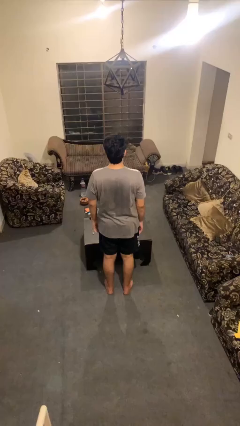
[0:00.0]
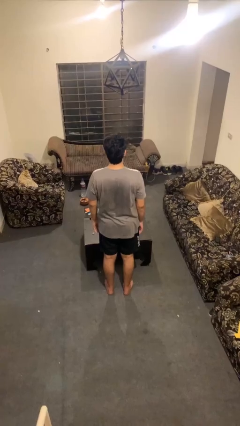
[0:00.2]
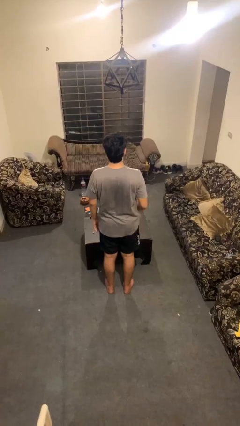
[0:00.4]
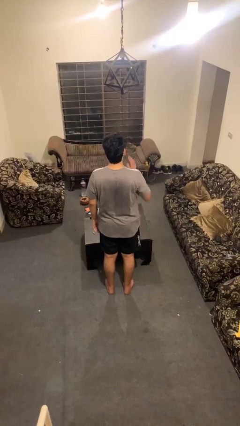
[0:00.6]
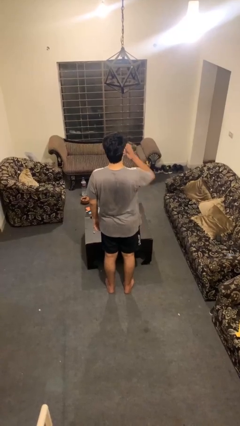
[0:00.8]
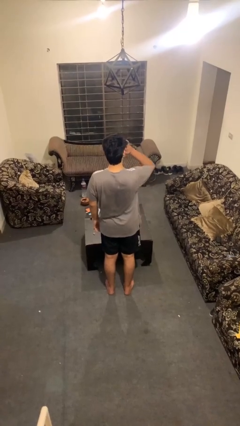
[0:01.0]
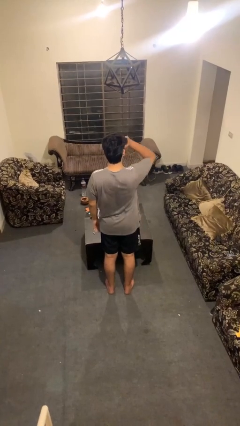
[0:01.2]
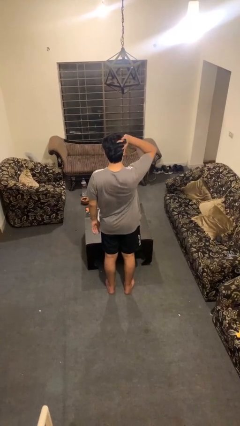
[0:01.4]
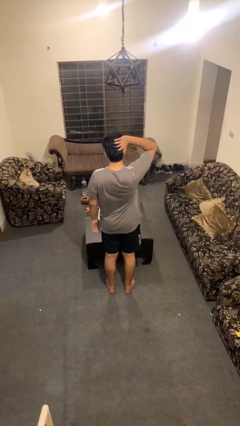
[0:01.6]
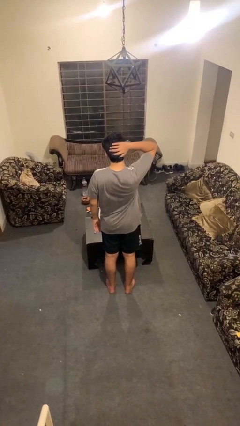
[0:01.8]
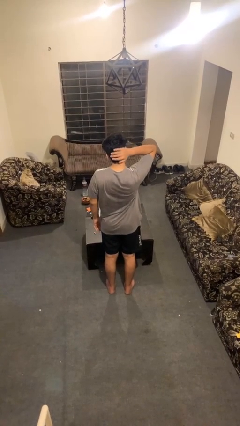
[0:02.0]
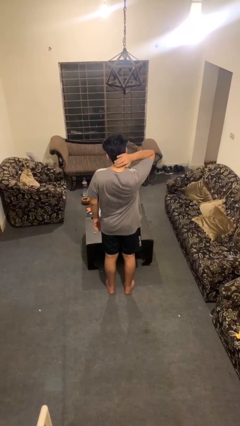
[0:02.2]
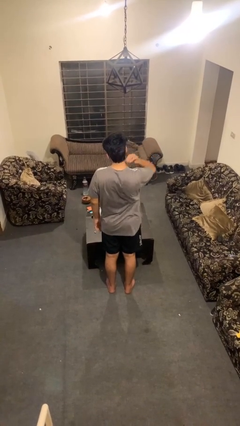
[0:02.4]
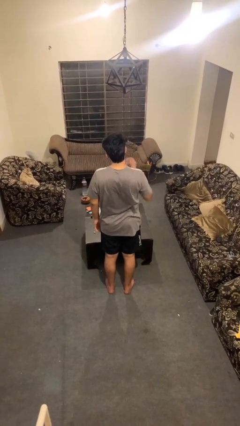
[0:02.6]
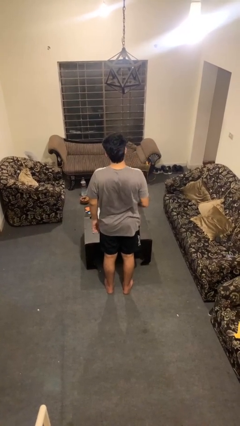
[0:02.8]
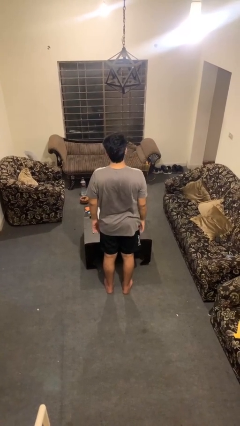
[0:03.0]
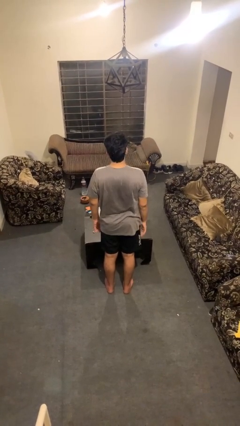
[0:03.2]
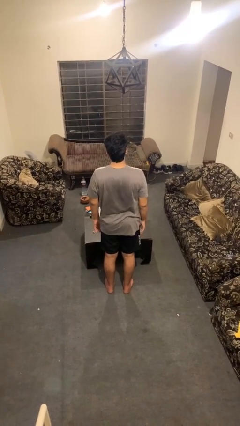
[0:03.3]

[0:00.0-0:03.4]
person strokes hair

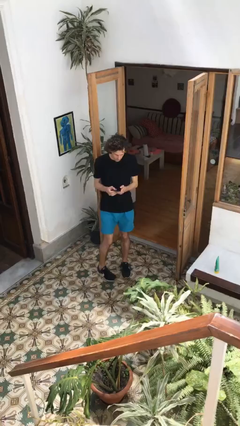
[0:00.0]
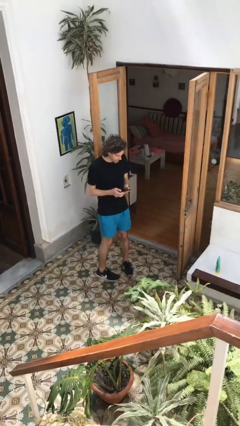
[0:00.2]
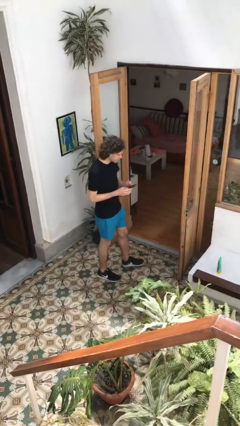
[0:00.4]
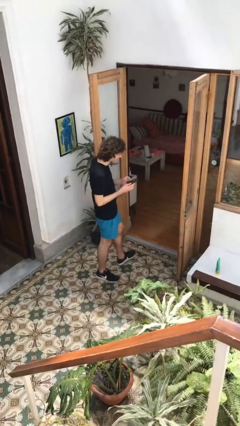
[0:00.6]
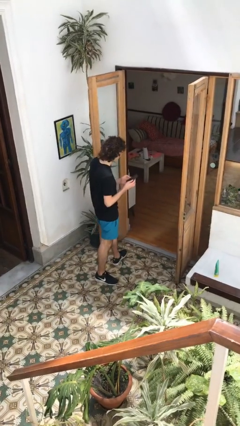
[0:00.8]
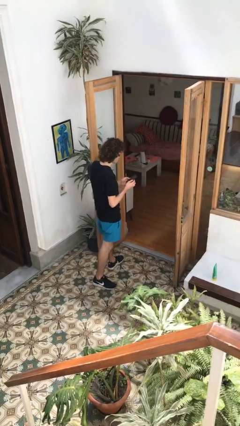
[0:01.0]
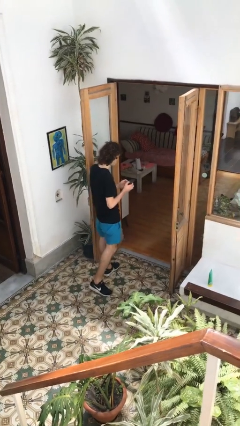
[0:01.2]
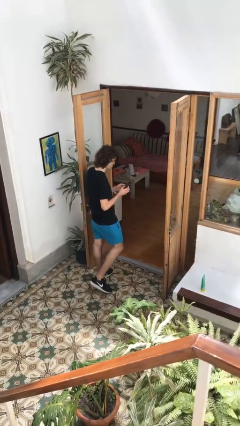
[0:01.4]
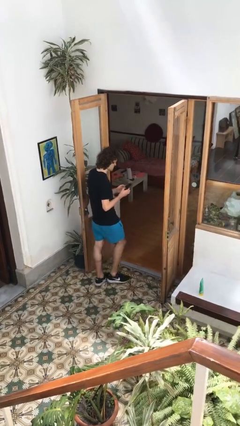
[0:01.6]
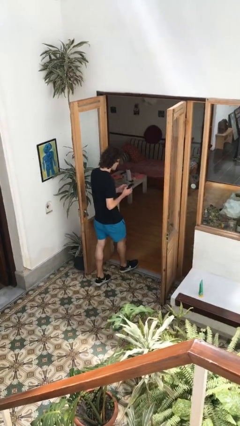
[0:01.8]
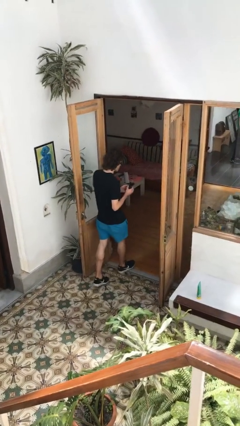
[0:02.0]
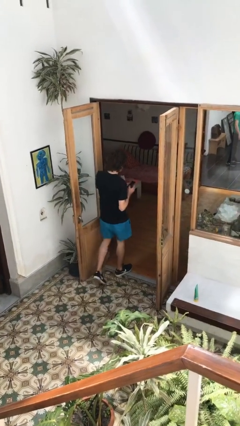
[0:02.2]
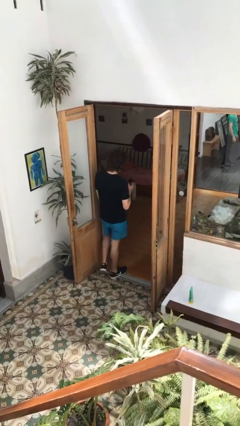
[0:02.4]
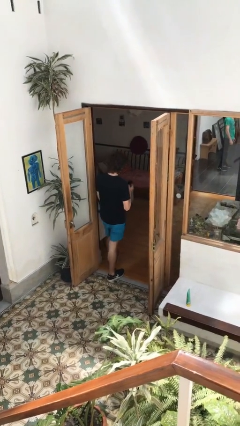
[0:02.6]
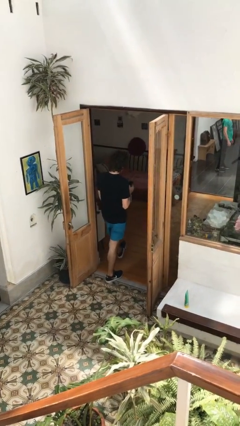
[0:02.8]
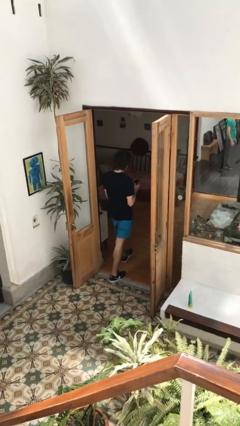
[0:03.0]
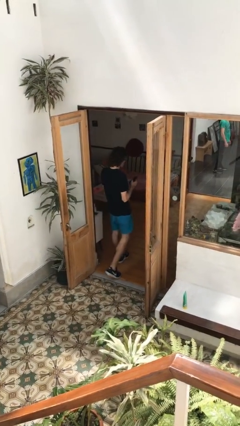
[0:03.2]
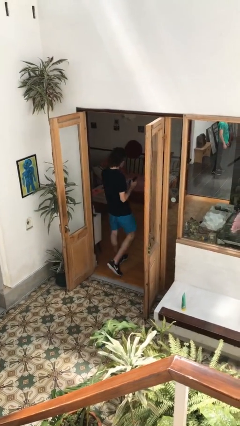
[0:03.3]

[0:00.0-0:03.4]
person exits scene through structure

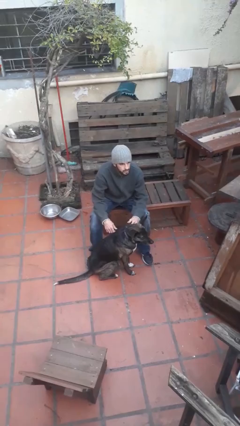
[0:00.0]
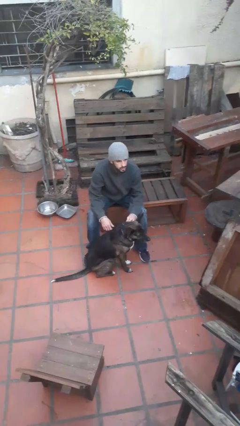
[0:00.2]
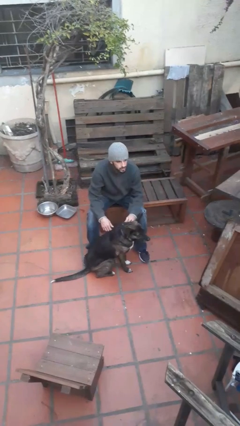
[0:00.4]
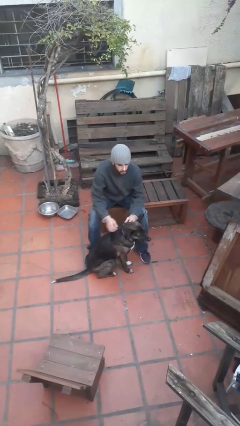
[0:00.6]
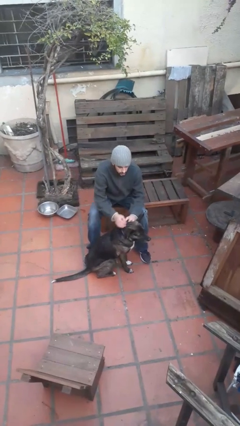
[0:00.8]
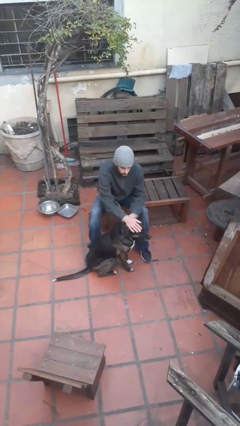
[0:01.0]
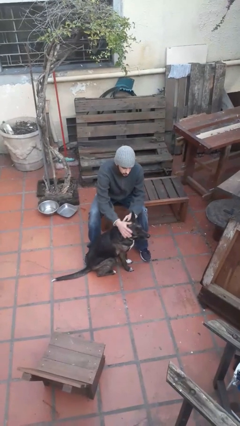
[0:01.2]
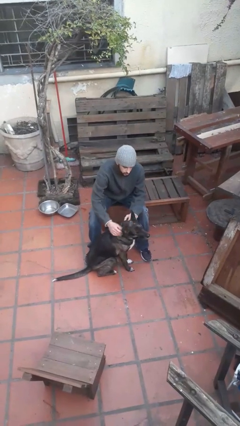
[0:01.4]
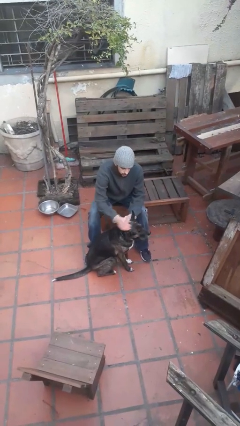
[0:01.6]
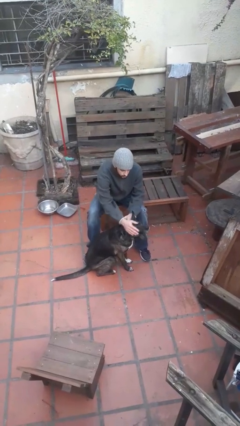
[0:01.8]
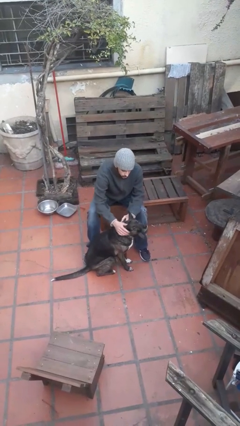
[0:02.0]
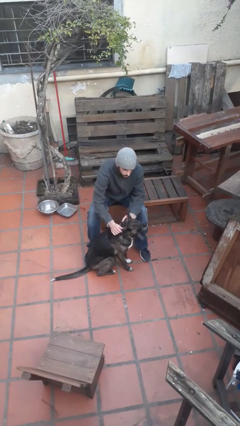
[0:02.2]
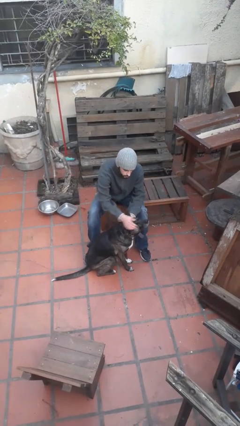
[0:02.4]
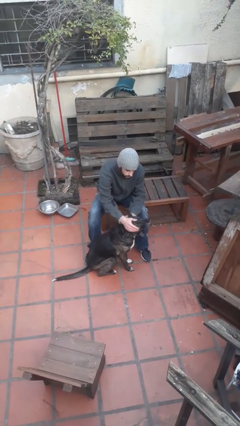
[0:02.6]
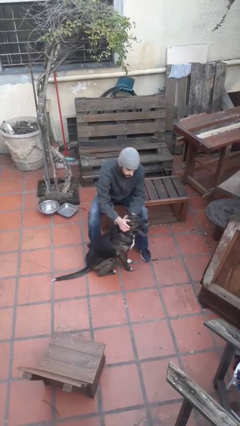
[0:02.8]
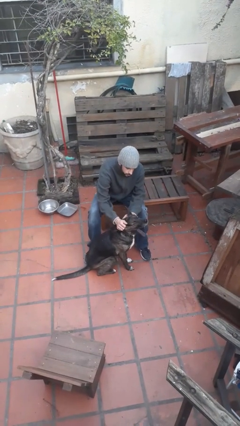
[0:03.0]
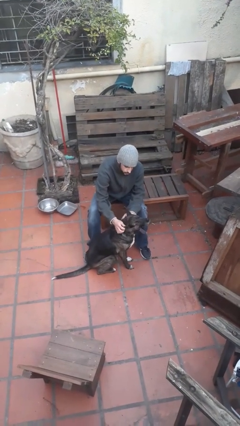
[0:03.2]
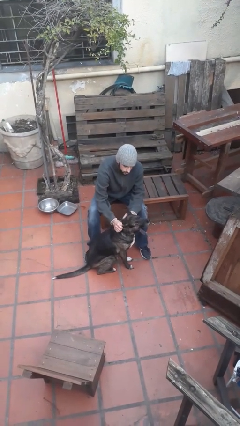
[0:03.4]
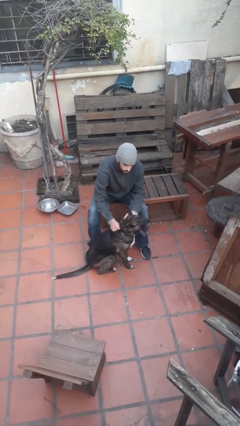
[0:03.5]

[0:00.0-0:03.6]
person pets dog

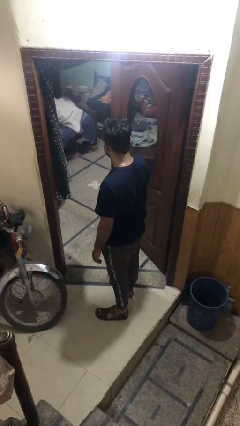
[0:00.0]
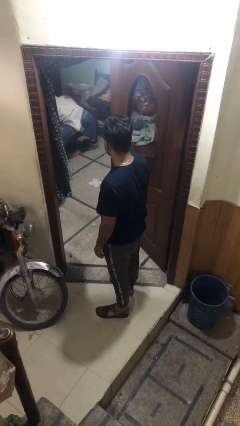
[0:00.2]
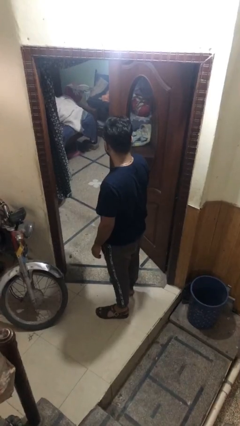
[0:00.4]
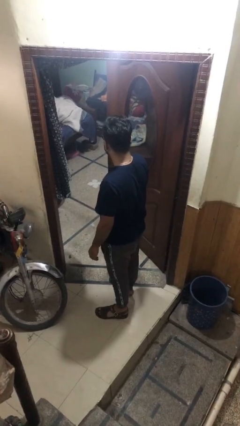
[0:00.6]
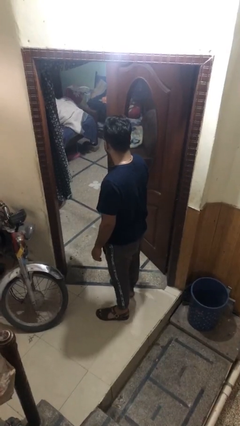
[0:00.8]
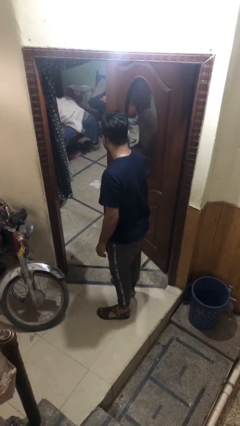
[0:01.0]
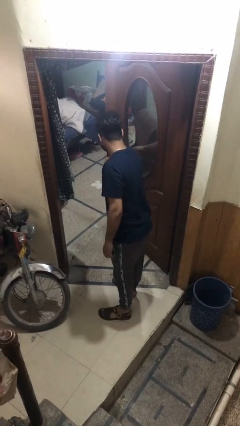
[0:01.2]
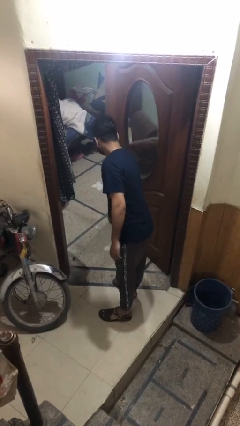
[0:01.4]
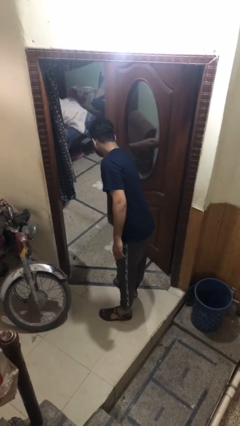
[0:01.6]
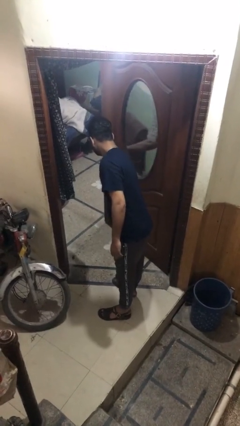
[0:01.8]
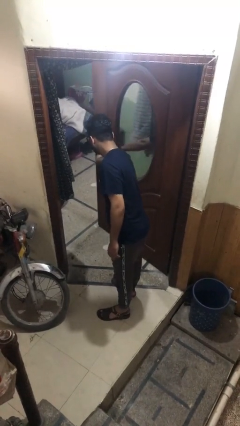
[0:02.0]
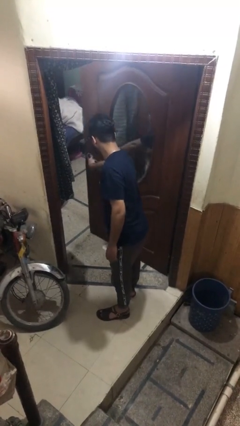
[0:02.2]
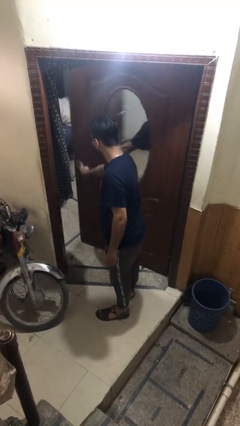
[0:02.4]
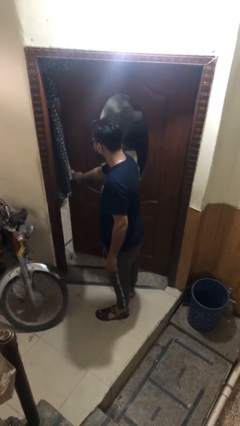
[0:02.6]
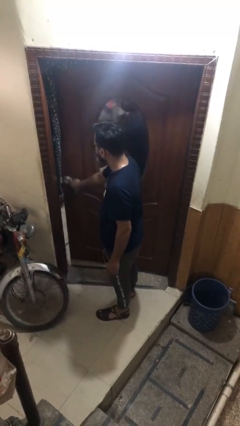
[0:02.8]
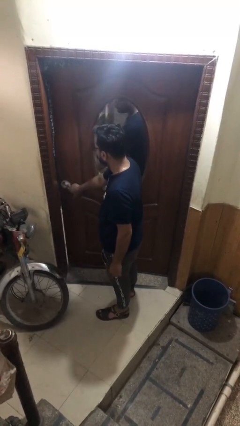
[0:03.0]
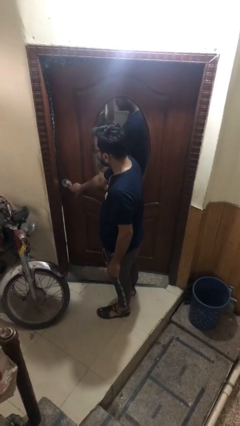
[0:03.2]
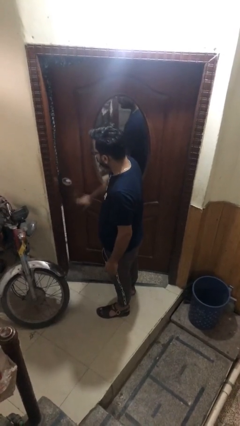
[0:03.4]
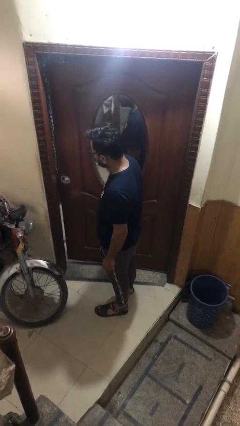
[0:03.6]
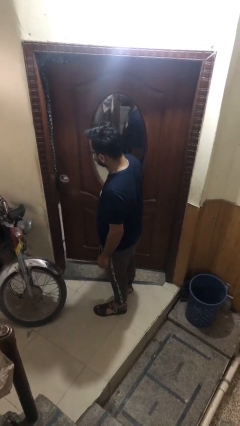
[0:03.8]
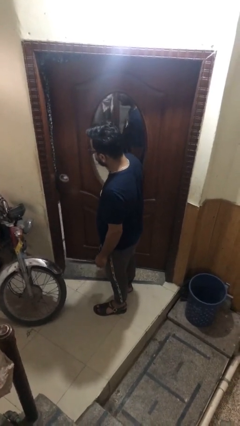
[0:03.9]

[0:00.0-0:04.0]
person closes facility door

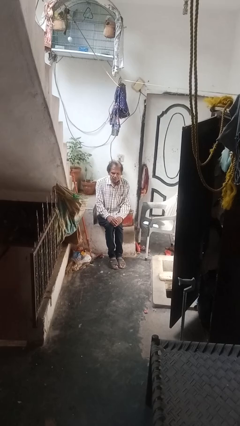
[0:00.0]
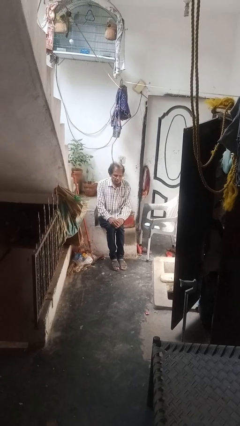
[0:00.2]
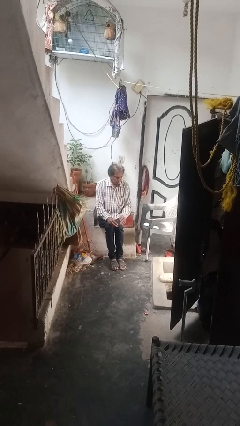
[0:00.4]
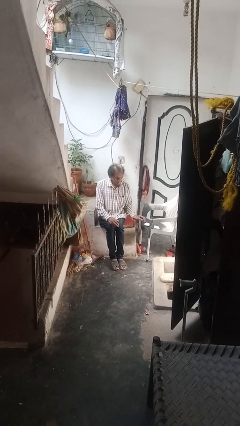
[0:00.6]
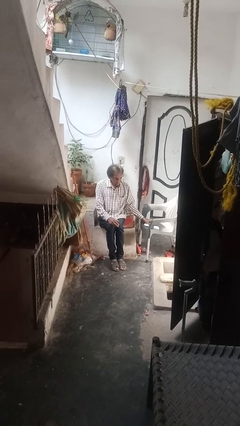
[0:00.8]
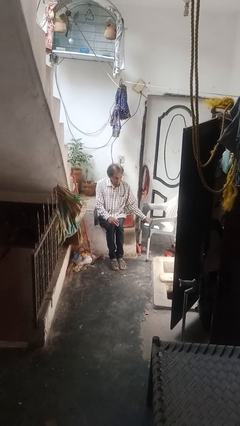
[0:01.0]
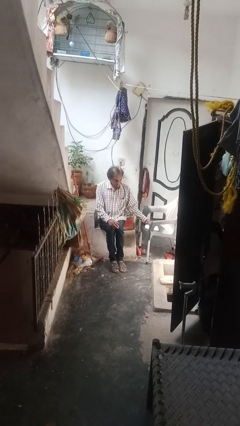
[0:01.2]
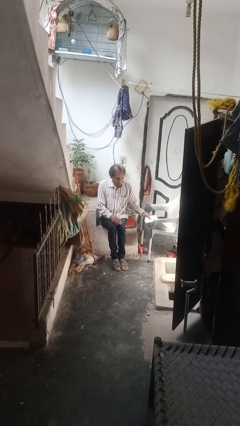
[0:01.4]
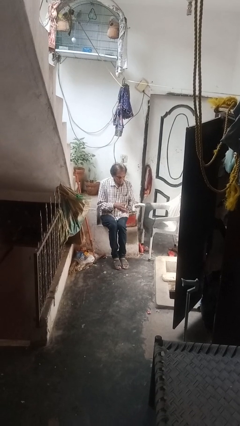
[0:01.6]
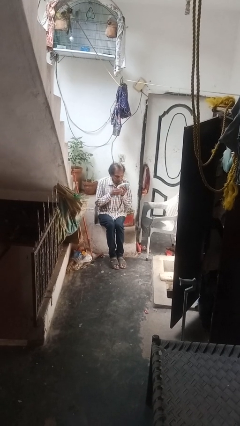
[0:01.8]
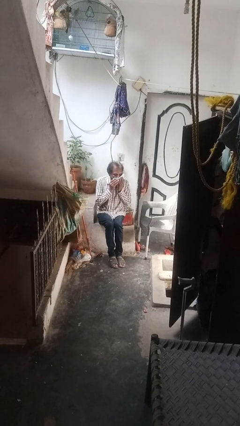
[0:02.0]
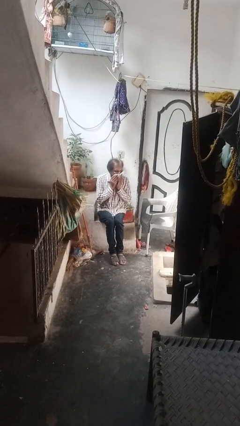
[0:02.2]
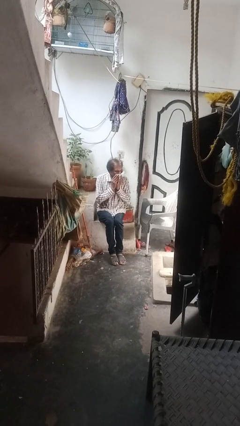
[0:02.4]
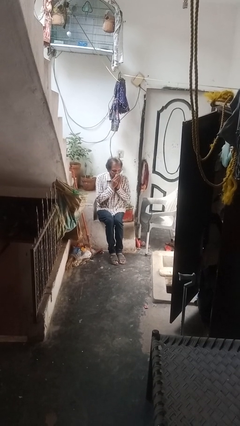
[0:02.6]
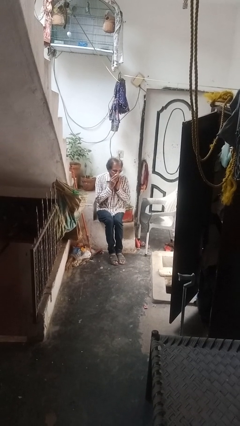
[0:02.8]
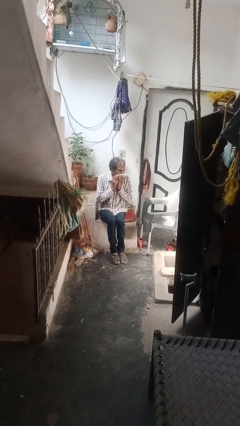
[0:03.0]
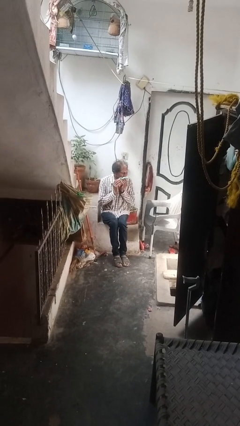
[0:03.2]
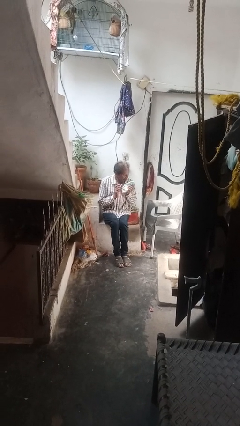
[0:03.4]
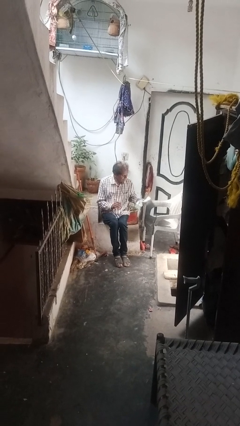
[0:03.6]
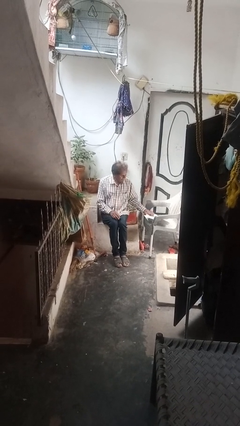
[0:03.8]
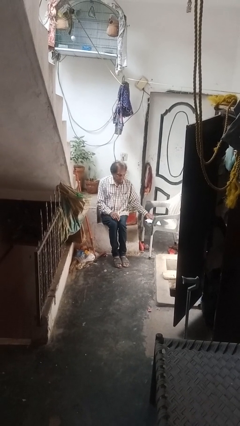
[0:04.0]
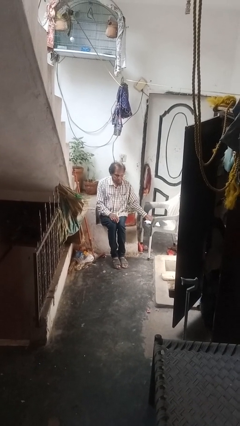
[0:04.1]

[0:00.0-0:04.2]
person wipes mouth with napkin
